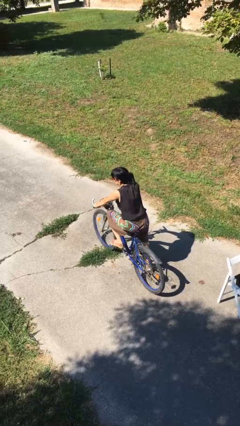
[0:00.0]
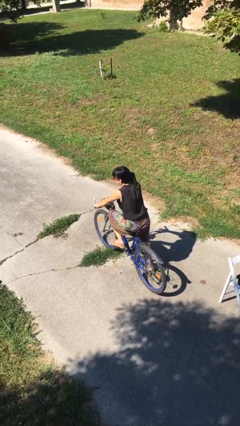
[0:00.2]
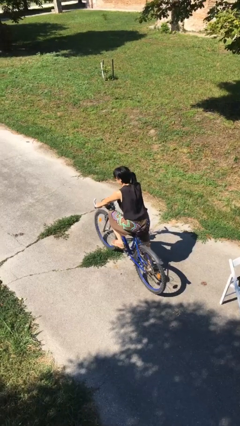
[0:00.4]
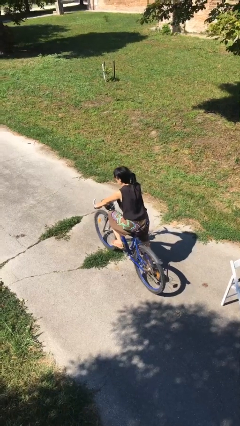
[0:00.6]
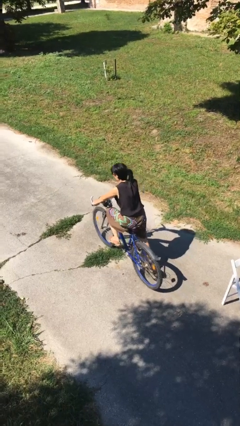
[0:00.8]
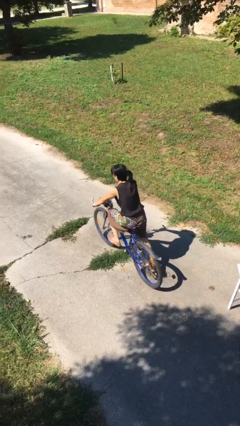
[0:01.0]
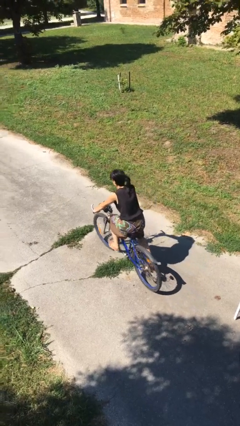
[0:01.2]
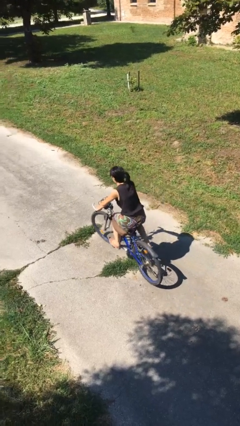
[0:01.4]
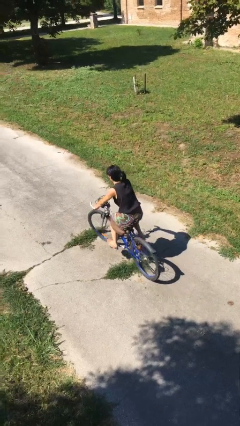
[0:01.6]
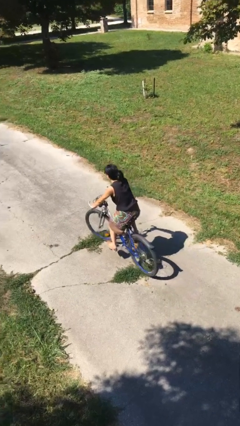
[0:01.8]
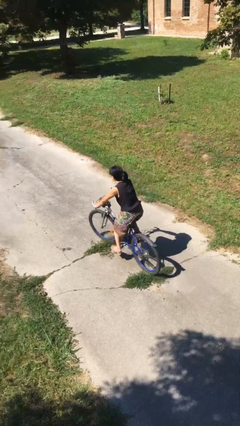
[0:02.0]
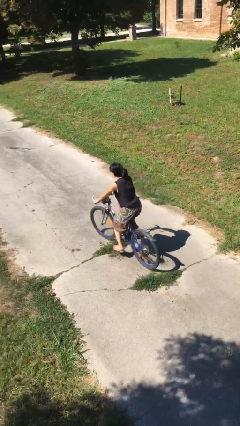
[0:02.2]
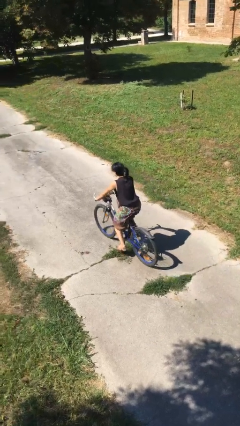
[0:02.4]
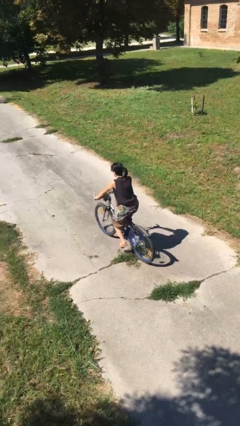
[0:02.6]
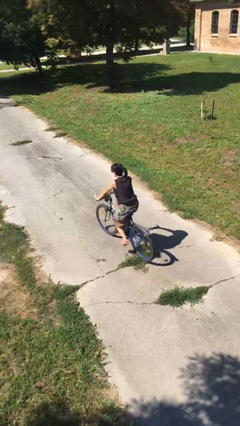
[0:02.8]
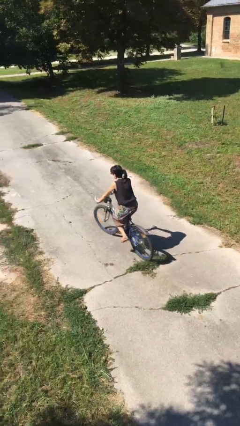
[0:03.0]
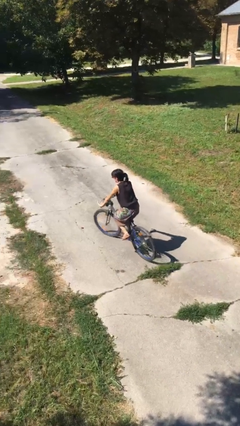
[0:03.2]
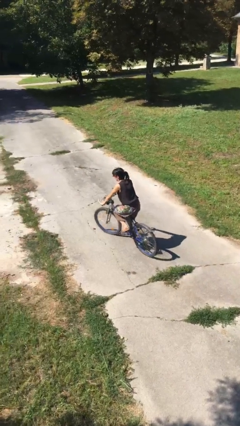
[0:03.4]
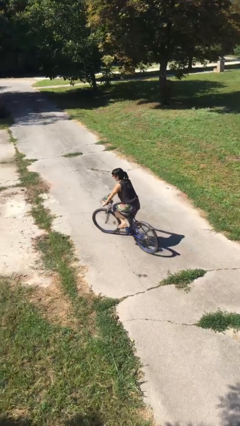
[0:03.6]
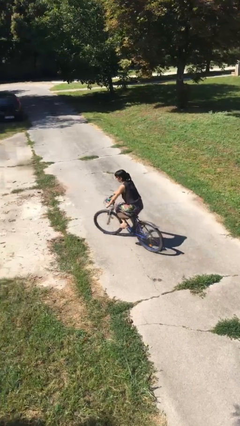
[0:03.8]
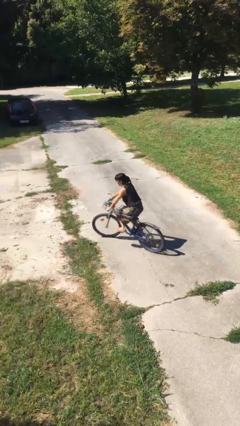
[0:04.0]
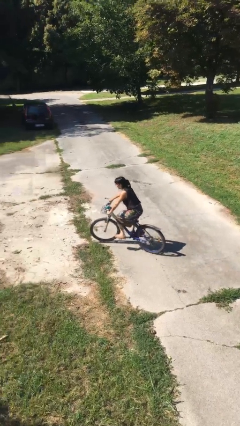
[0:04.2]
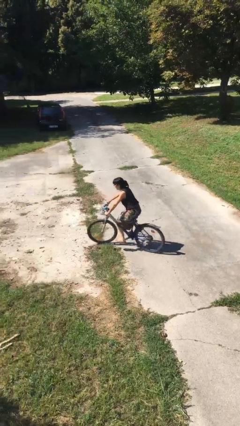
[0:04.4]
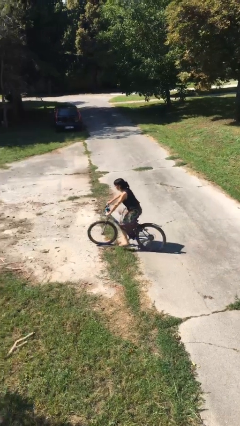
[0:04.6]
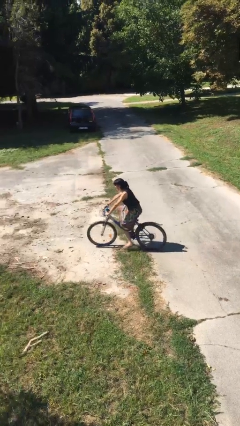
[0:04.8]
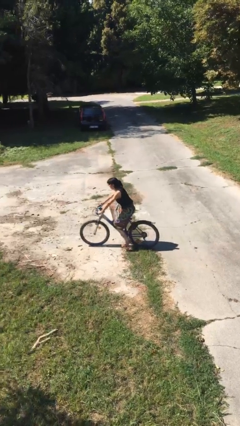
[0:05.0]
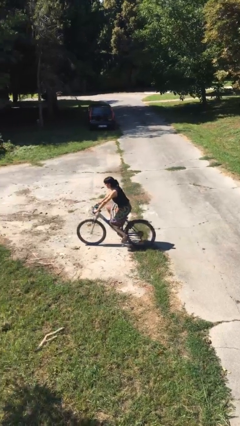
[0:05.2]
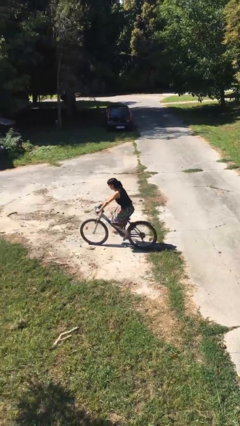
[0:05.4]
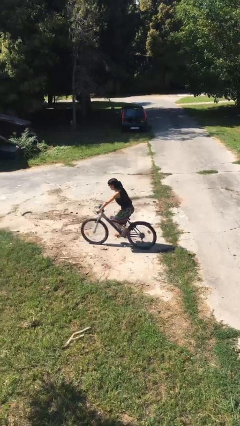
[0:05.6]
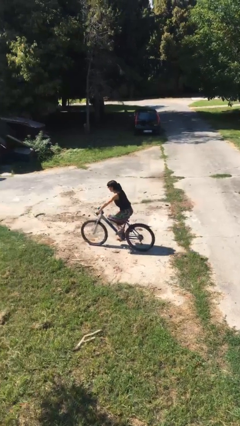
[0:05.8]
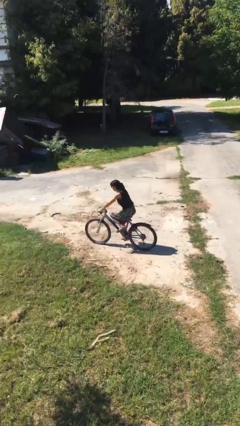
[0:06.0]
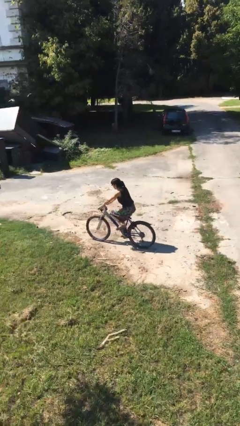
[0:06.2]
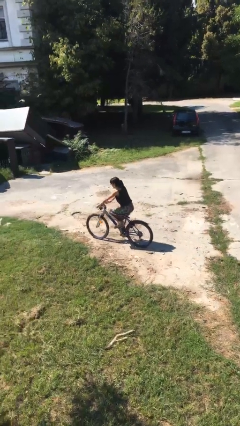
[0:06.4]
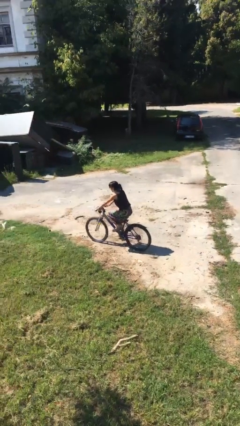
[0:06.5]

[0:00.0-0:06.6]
person rides bicycle

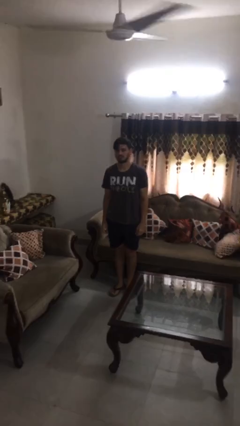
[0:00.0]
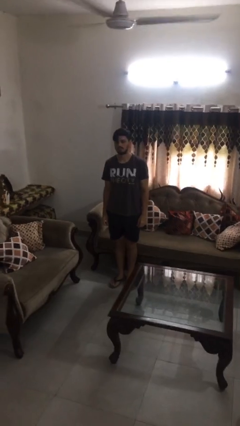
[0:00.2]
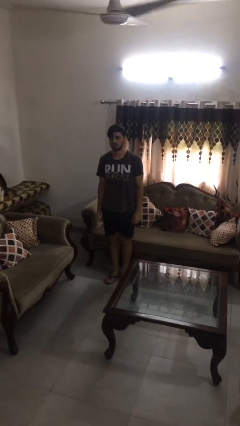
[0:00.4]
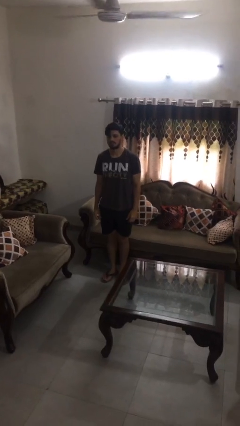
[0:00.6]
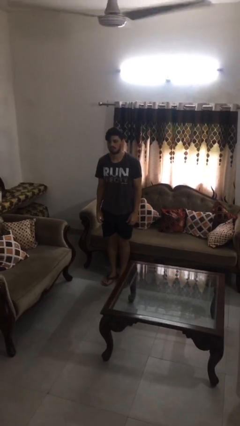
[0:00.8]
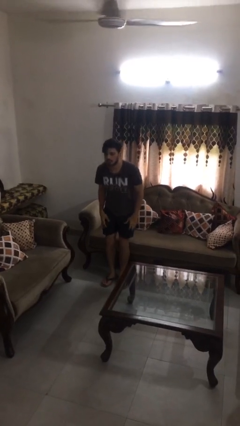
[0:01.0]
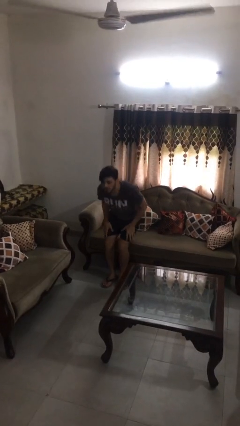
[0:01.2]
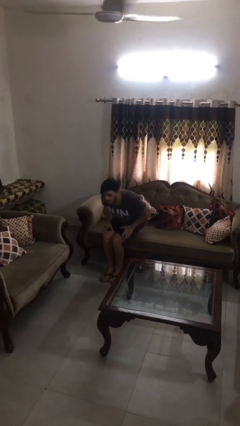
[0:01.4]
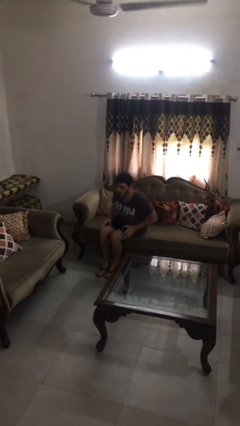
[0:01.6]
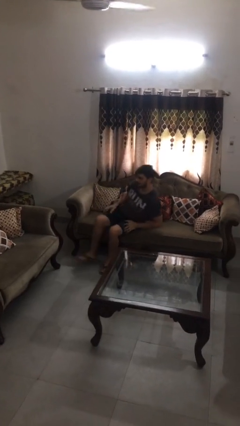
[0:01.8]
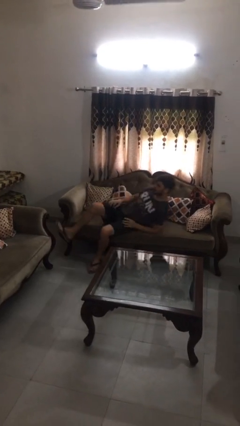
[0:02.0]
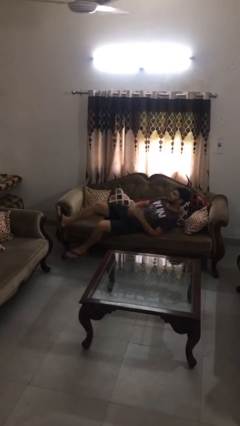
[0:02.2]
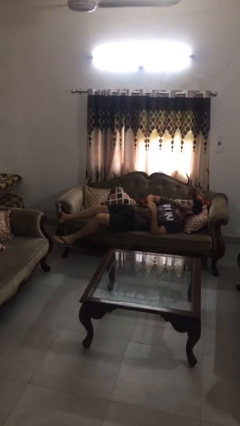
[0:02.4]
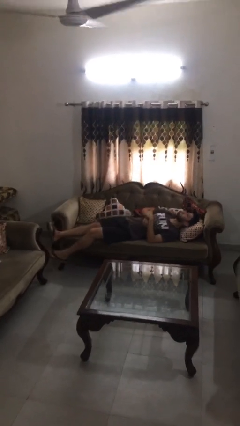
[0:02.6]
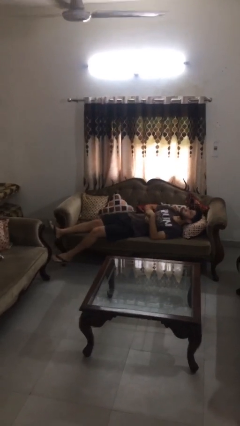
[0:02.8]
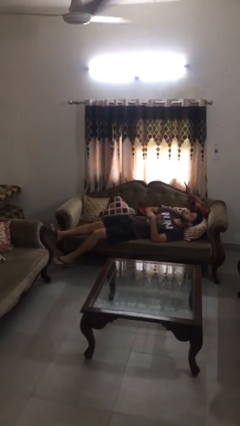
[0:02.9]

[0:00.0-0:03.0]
person lies down on couch

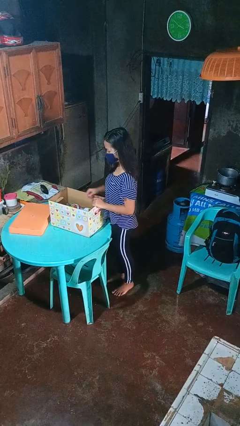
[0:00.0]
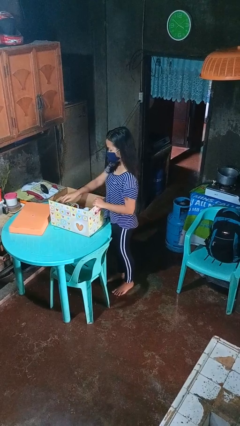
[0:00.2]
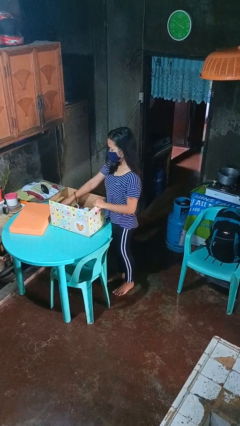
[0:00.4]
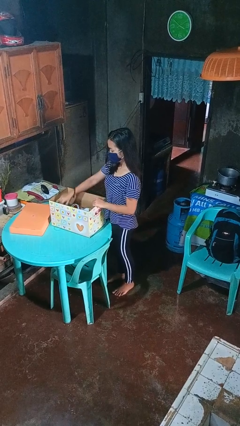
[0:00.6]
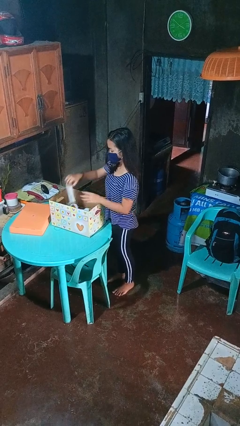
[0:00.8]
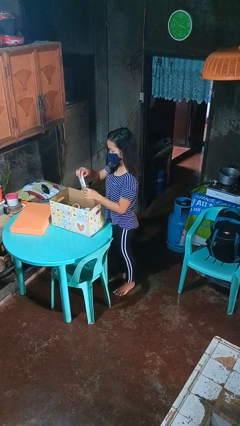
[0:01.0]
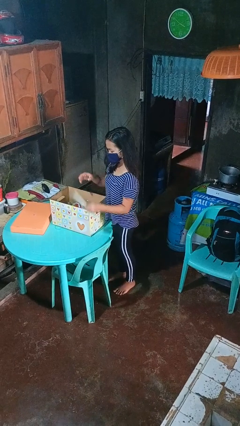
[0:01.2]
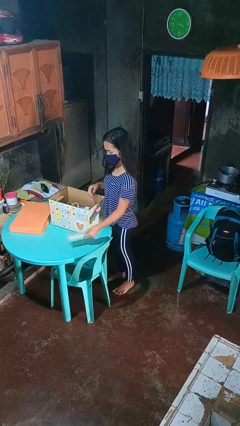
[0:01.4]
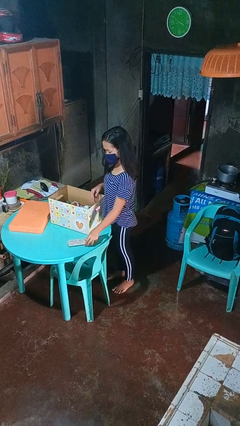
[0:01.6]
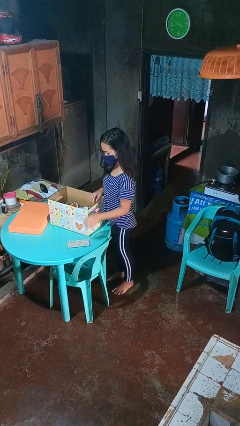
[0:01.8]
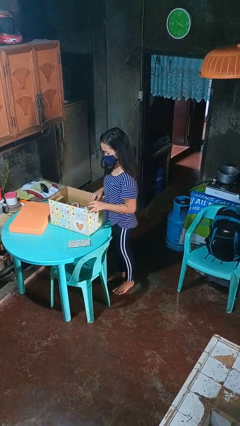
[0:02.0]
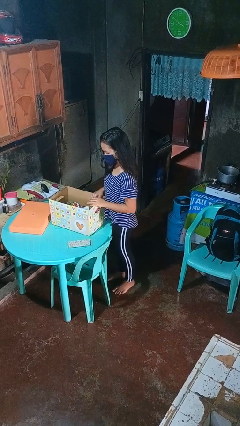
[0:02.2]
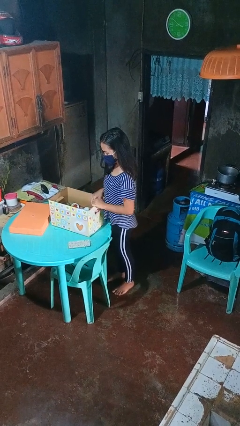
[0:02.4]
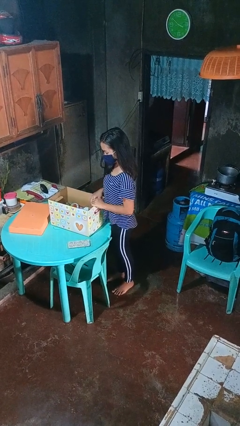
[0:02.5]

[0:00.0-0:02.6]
person takes object from box

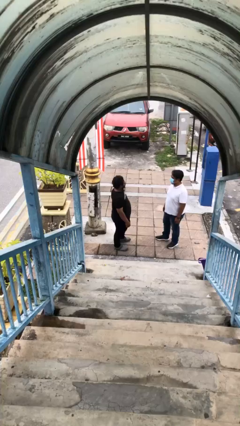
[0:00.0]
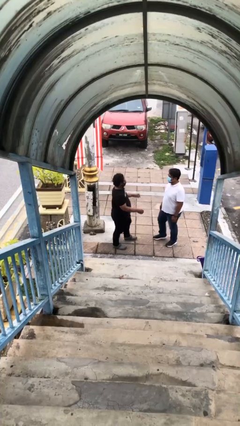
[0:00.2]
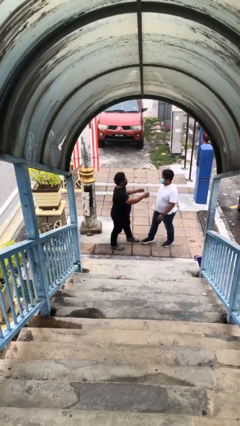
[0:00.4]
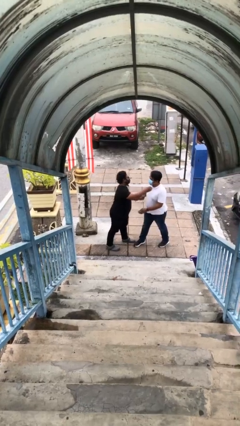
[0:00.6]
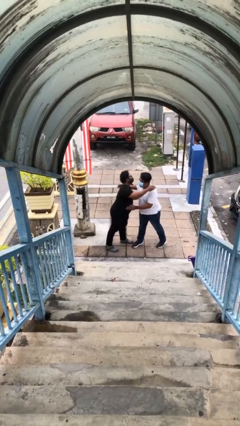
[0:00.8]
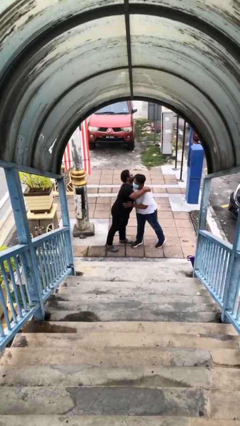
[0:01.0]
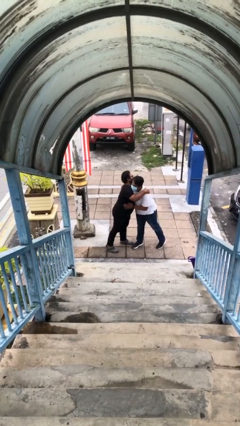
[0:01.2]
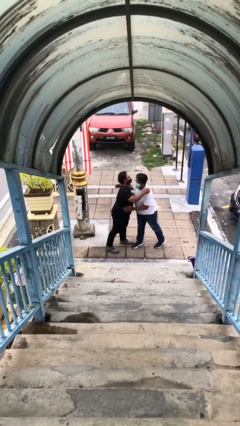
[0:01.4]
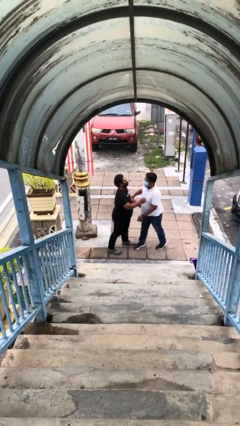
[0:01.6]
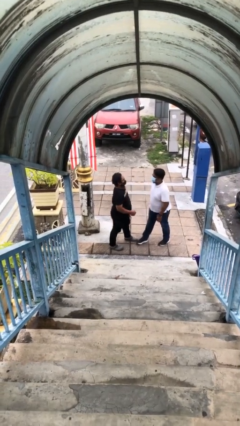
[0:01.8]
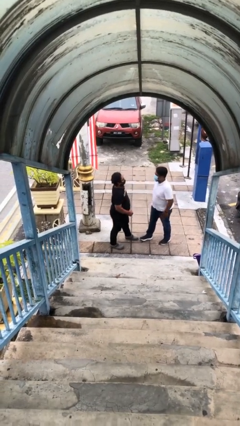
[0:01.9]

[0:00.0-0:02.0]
person embraces person

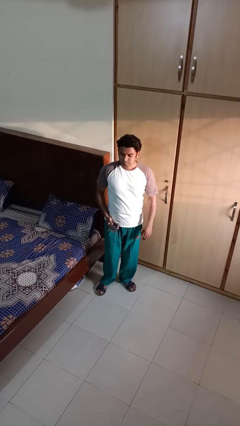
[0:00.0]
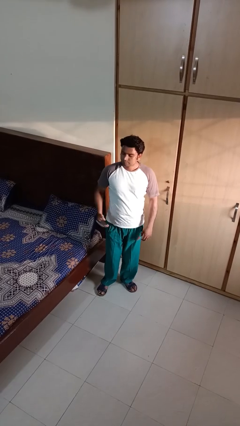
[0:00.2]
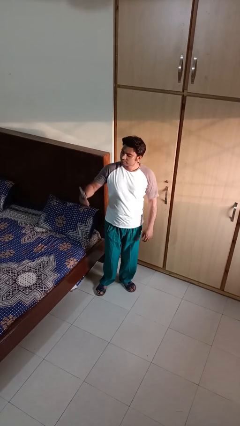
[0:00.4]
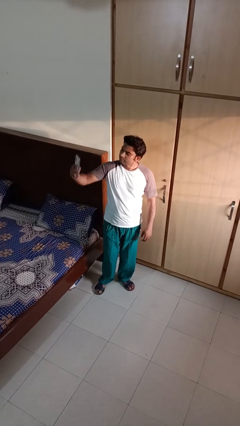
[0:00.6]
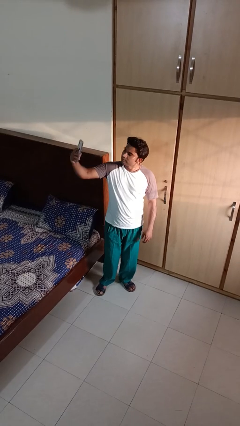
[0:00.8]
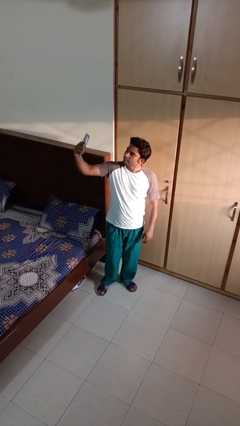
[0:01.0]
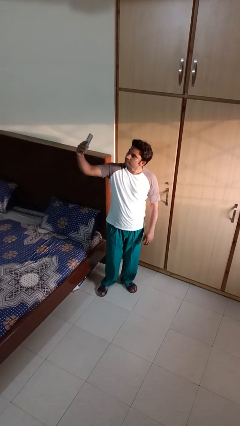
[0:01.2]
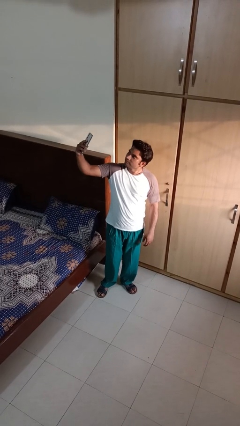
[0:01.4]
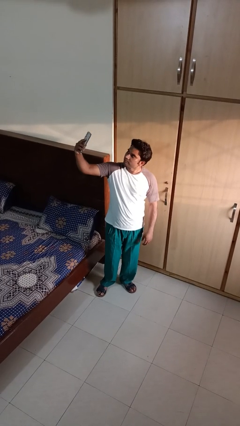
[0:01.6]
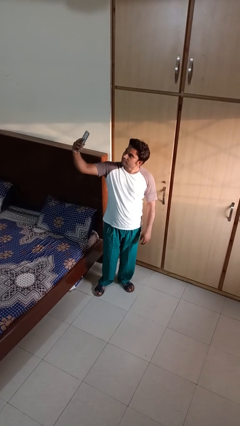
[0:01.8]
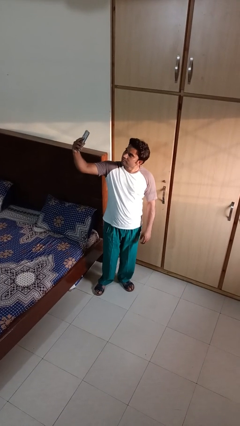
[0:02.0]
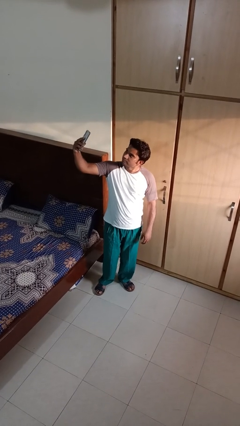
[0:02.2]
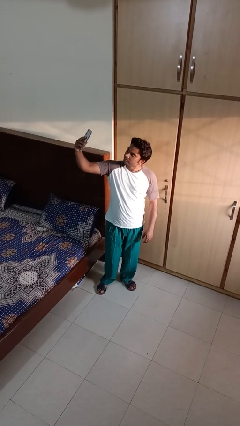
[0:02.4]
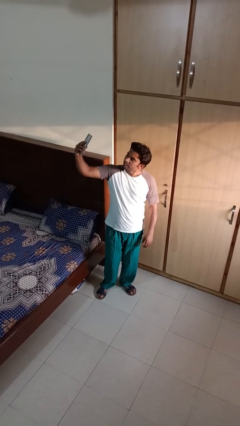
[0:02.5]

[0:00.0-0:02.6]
person takes selfie

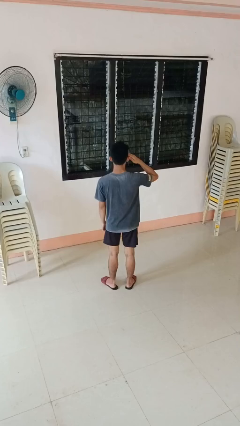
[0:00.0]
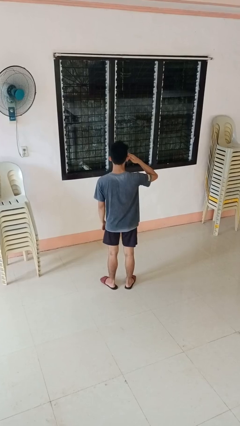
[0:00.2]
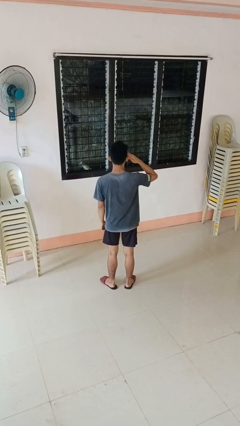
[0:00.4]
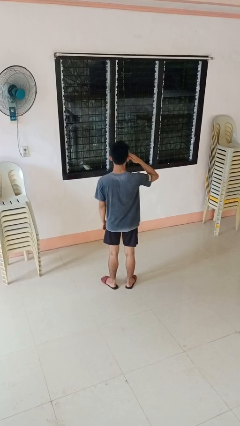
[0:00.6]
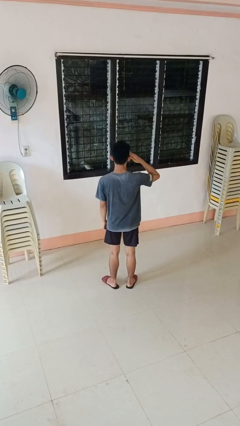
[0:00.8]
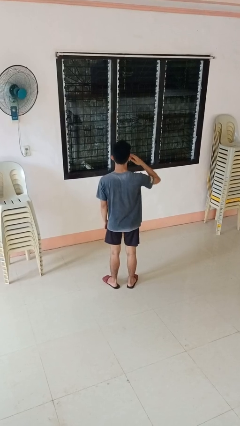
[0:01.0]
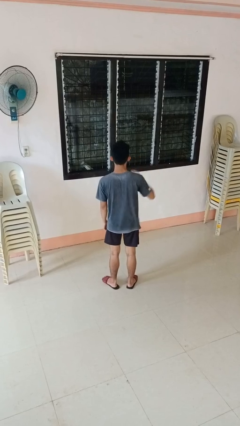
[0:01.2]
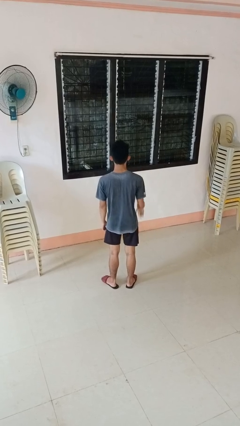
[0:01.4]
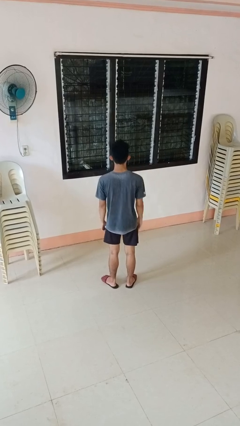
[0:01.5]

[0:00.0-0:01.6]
person salutes
